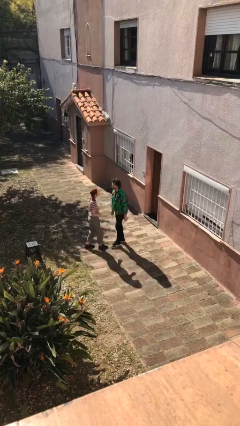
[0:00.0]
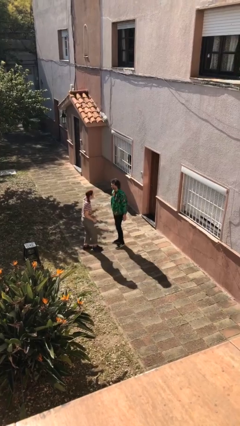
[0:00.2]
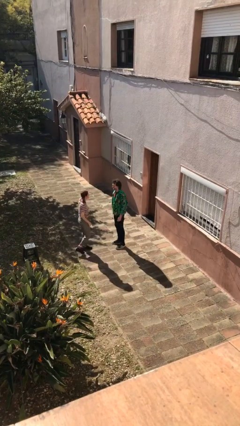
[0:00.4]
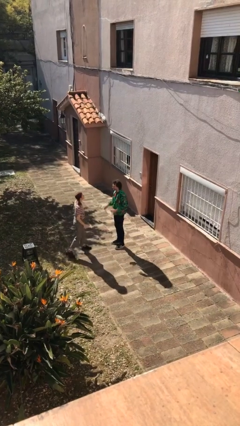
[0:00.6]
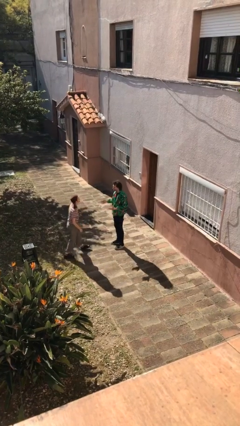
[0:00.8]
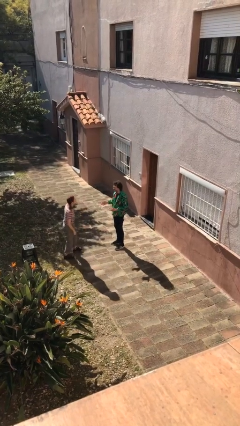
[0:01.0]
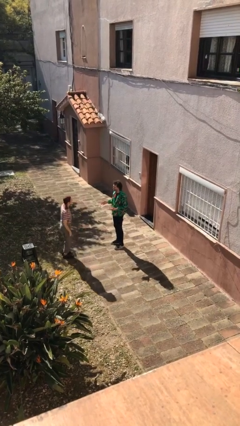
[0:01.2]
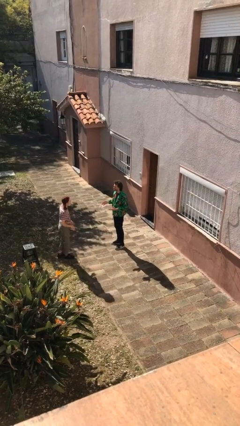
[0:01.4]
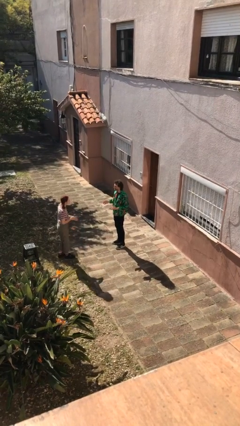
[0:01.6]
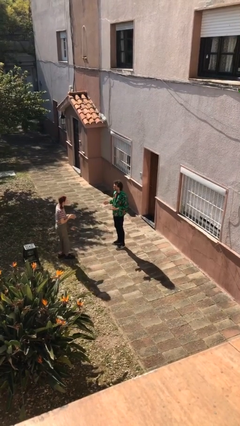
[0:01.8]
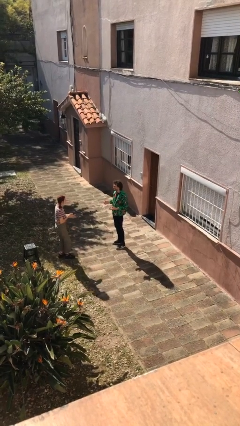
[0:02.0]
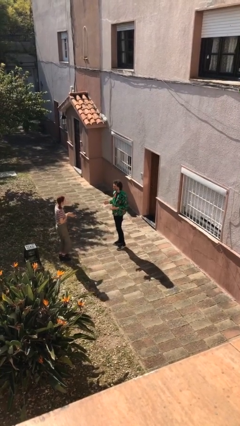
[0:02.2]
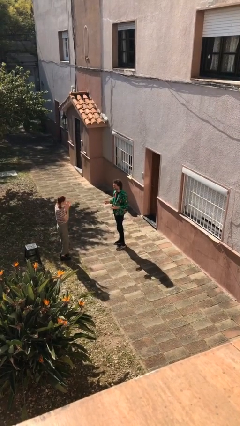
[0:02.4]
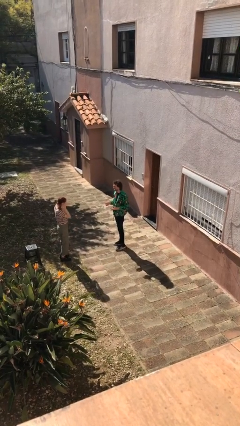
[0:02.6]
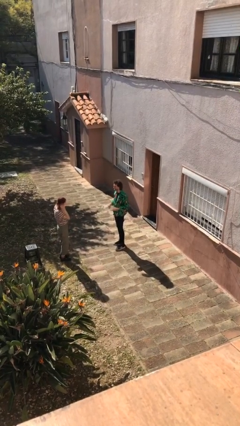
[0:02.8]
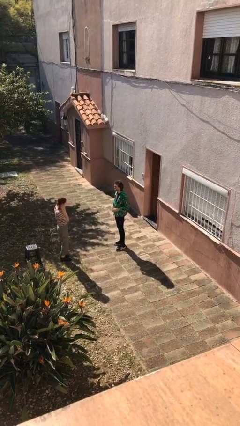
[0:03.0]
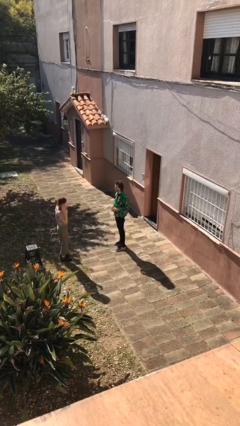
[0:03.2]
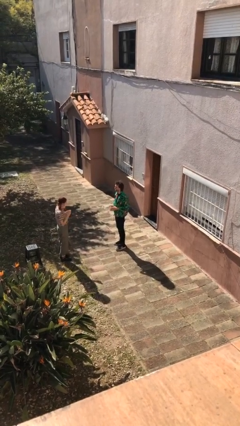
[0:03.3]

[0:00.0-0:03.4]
person talks to person

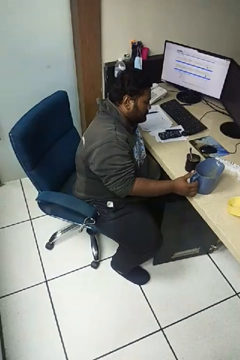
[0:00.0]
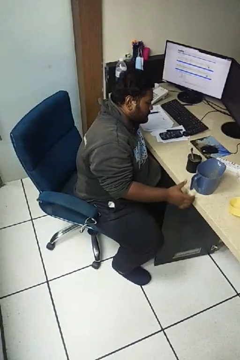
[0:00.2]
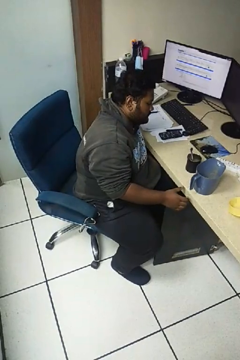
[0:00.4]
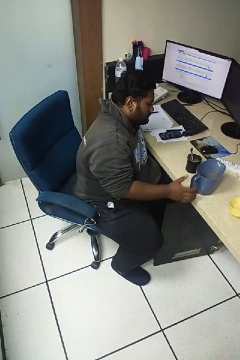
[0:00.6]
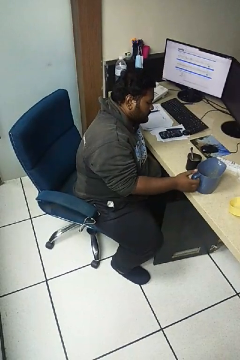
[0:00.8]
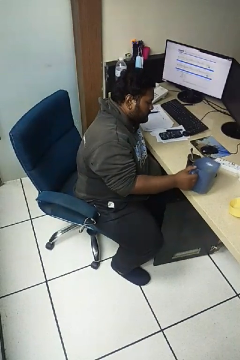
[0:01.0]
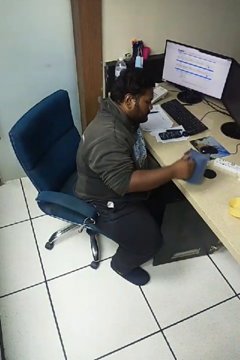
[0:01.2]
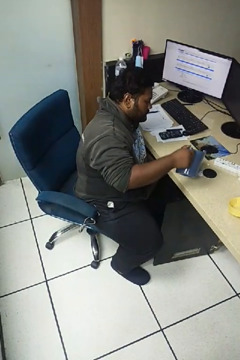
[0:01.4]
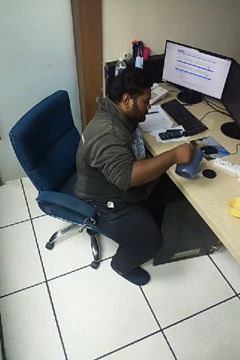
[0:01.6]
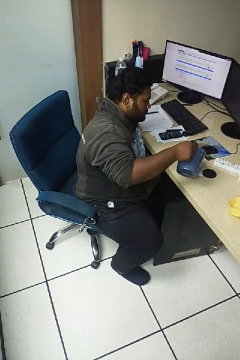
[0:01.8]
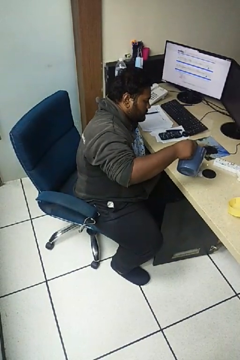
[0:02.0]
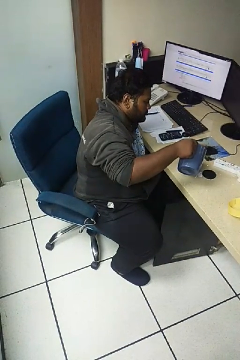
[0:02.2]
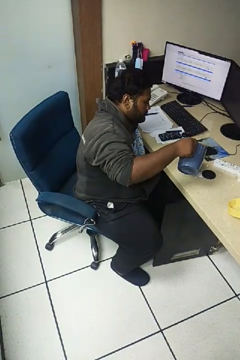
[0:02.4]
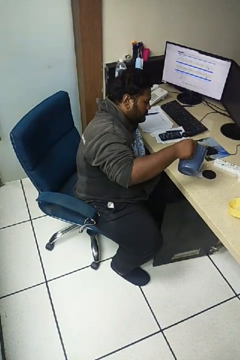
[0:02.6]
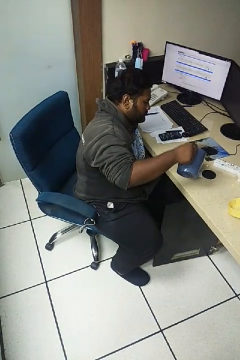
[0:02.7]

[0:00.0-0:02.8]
person pours coffee into mug

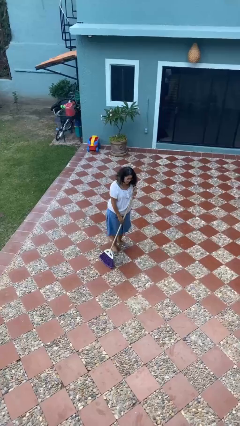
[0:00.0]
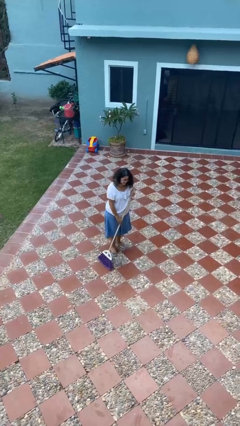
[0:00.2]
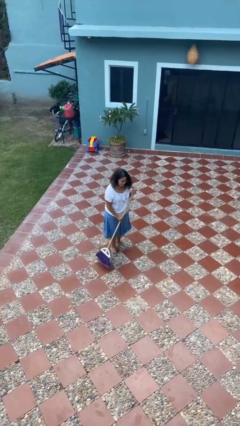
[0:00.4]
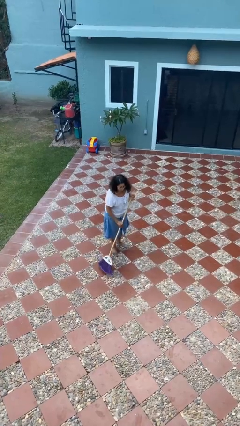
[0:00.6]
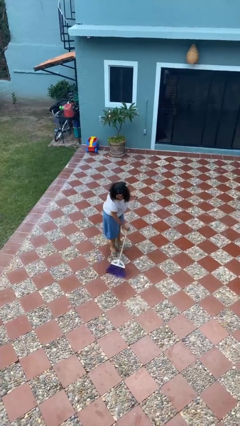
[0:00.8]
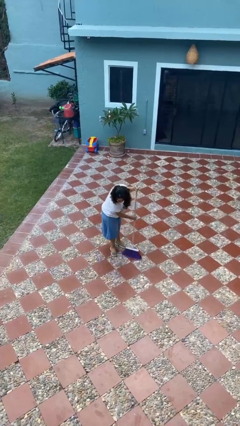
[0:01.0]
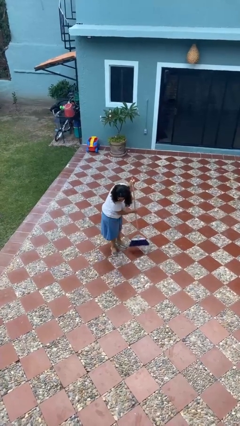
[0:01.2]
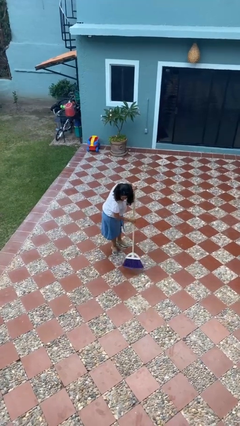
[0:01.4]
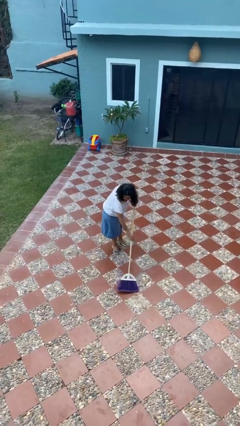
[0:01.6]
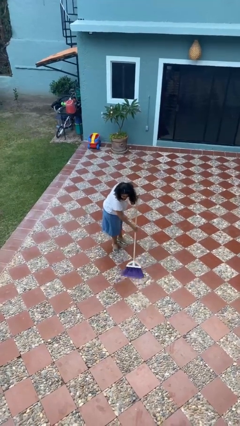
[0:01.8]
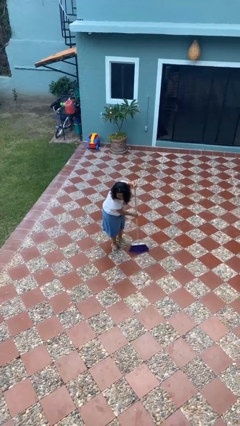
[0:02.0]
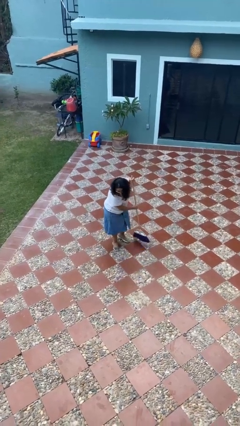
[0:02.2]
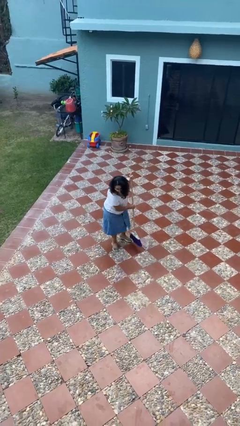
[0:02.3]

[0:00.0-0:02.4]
person sweeps floor

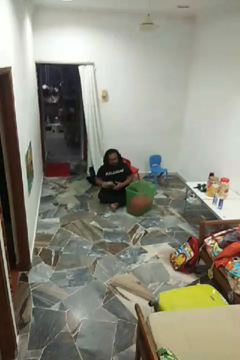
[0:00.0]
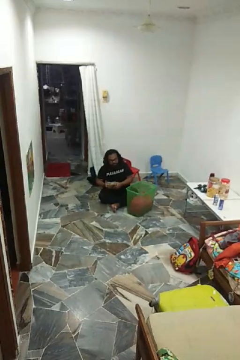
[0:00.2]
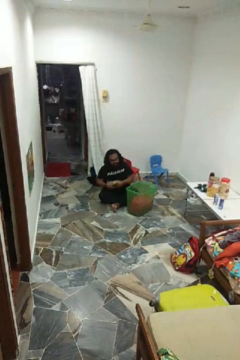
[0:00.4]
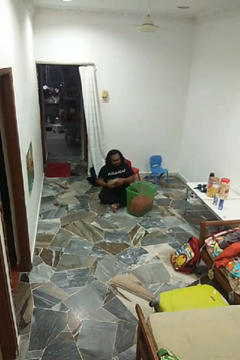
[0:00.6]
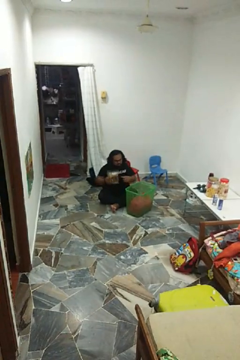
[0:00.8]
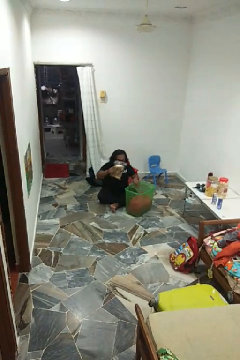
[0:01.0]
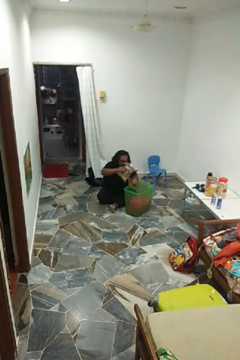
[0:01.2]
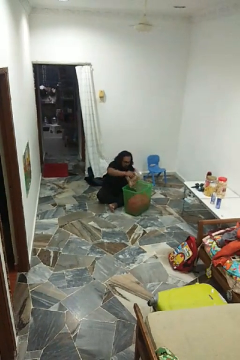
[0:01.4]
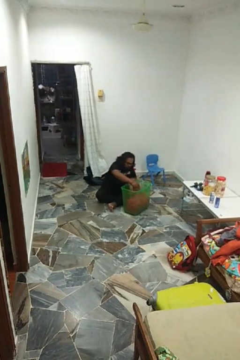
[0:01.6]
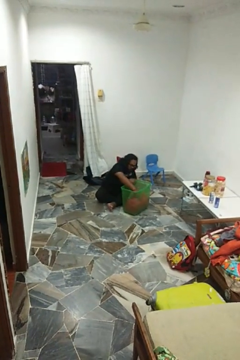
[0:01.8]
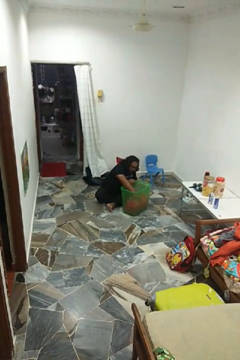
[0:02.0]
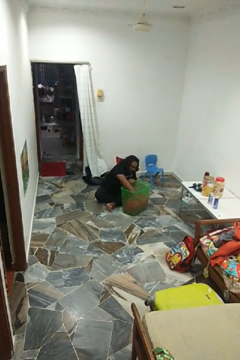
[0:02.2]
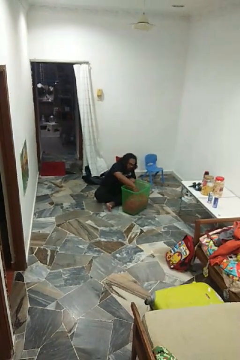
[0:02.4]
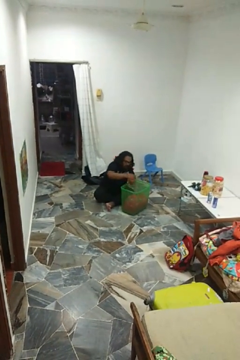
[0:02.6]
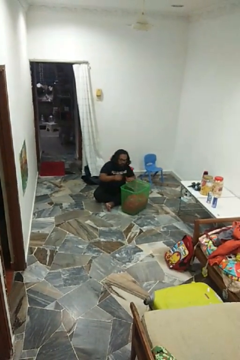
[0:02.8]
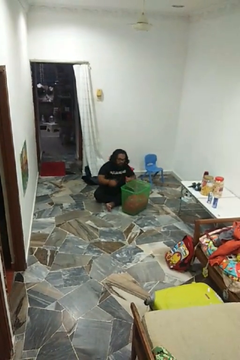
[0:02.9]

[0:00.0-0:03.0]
person puts object into basket

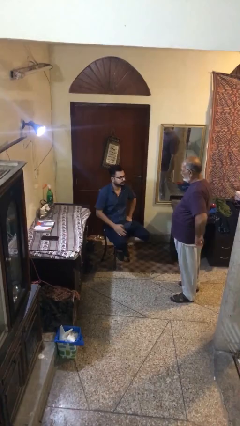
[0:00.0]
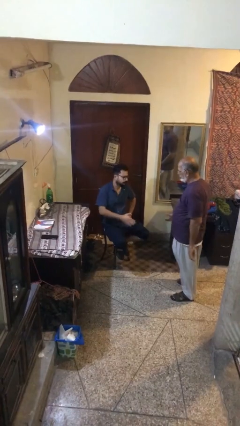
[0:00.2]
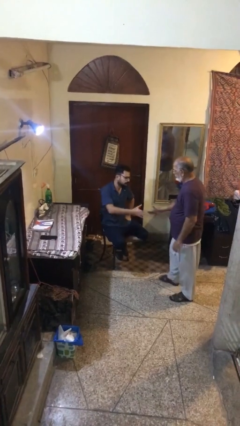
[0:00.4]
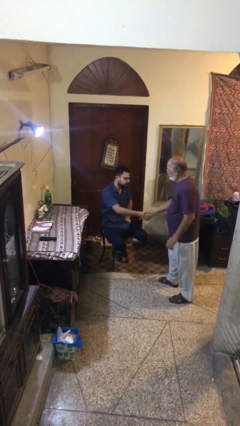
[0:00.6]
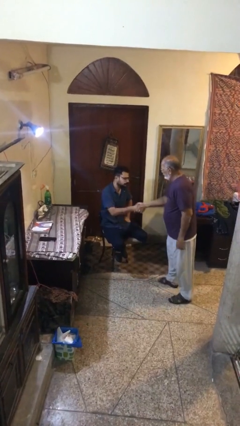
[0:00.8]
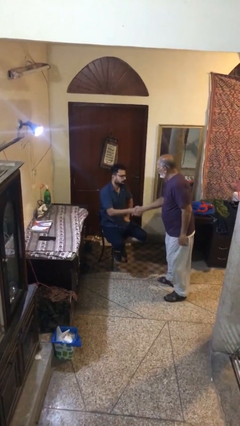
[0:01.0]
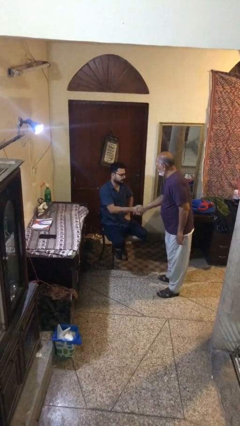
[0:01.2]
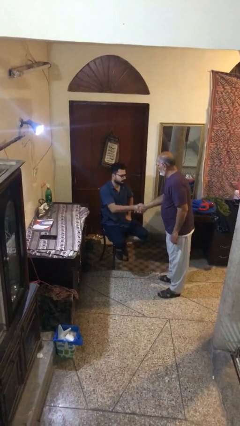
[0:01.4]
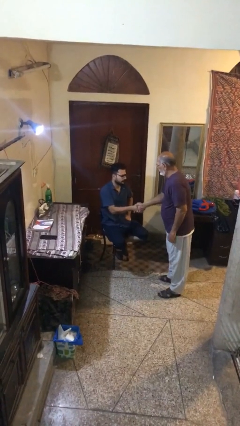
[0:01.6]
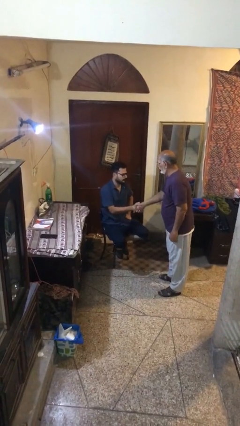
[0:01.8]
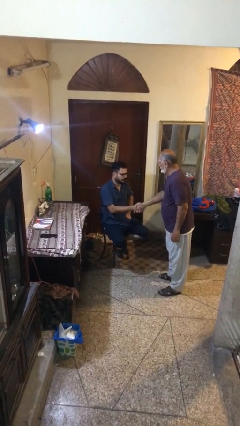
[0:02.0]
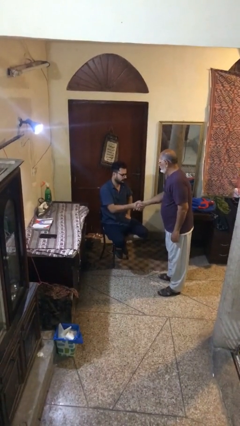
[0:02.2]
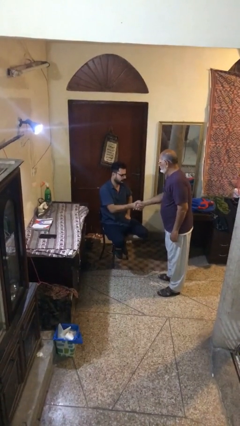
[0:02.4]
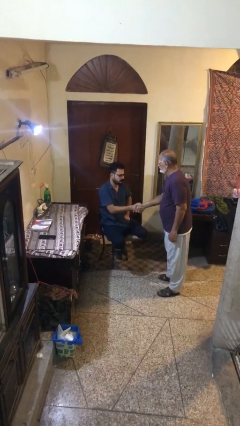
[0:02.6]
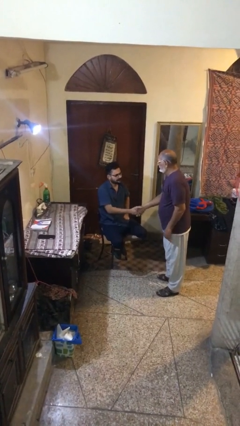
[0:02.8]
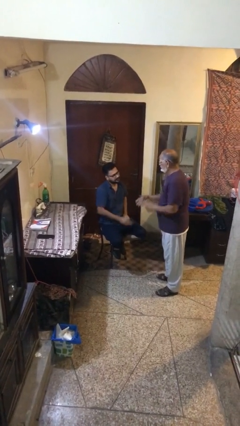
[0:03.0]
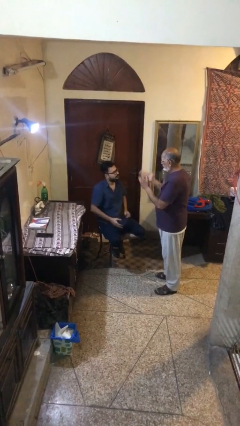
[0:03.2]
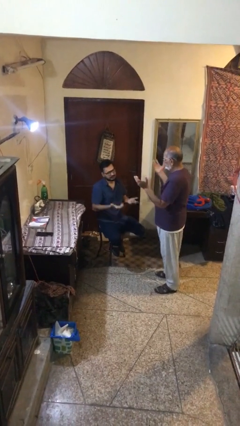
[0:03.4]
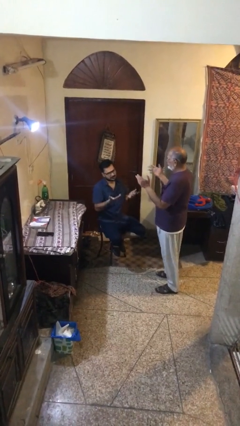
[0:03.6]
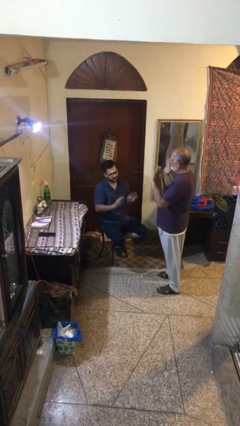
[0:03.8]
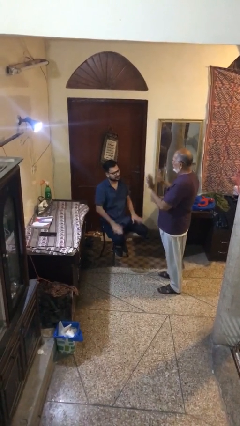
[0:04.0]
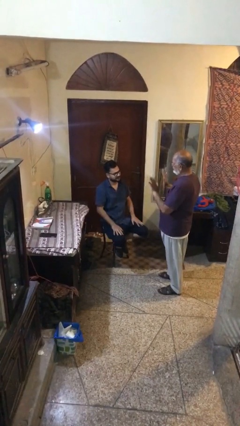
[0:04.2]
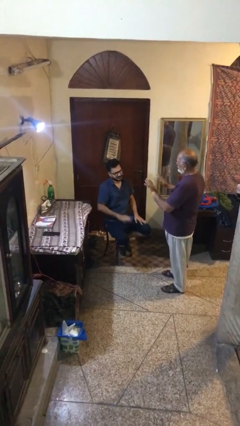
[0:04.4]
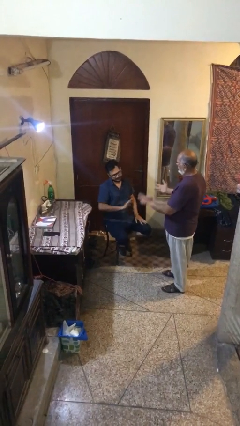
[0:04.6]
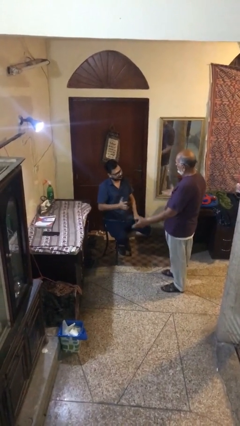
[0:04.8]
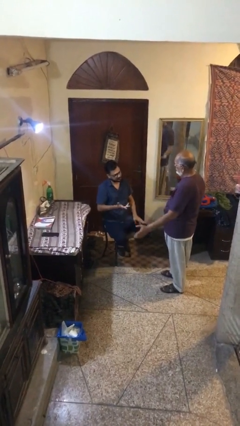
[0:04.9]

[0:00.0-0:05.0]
person shakes hand

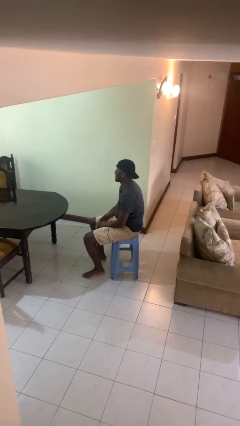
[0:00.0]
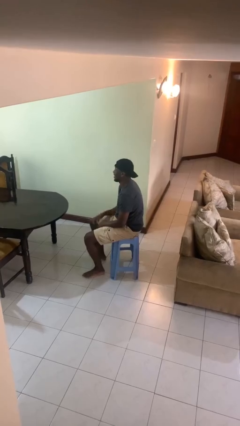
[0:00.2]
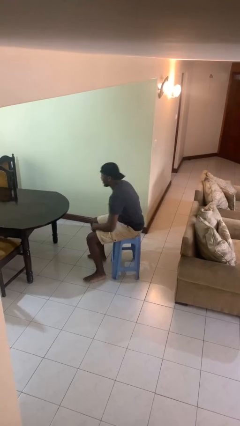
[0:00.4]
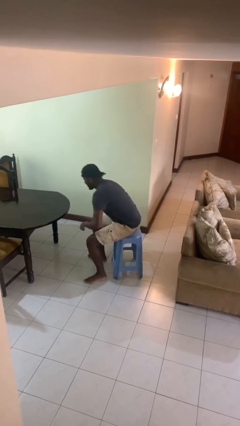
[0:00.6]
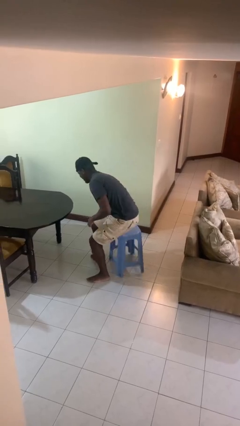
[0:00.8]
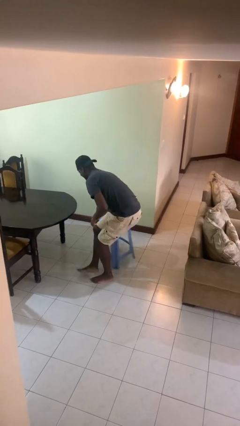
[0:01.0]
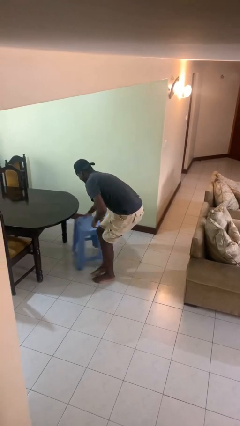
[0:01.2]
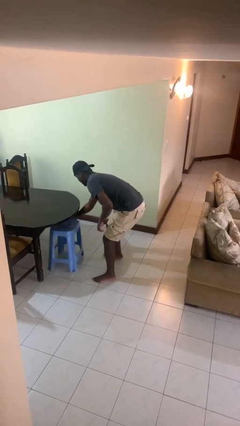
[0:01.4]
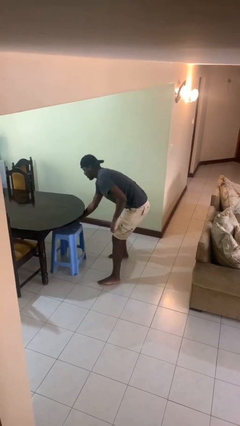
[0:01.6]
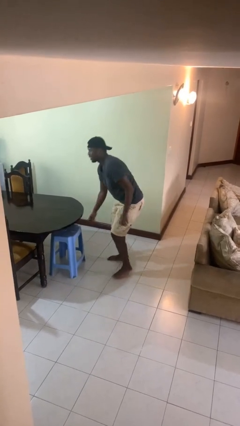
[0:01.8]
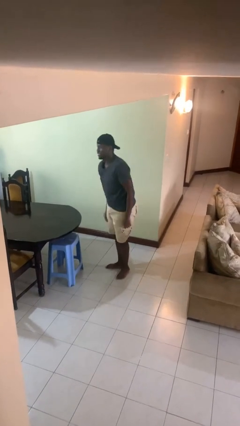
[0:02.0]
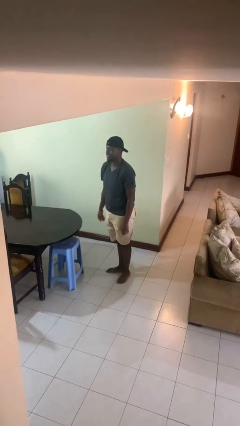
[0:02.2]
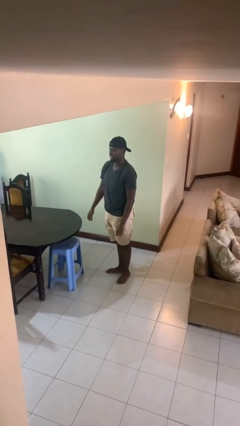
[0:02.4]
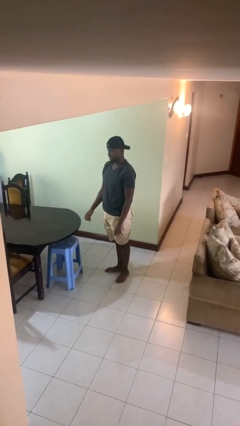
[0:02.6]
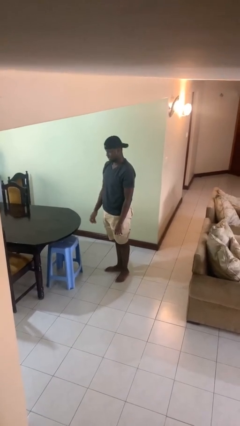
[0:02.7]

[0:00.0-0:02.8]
person stands up
